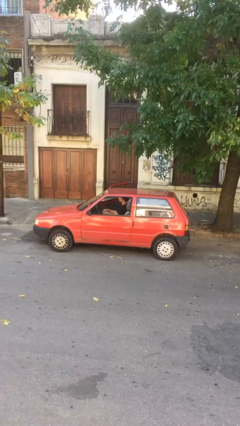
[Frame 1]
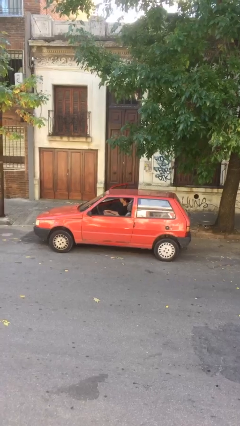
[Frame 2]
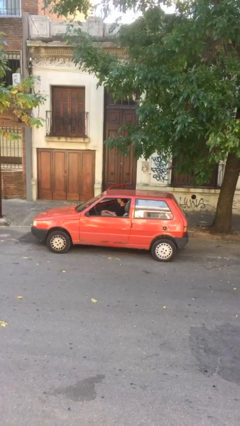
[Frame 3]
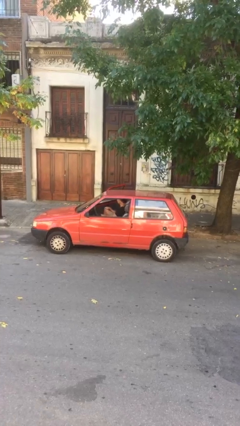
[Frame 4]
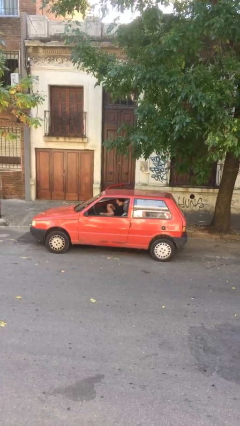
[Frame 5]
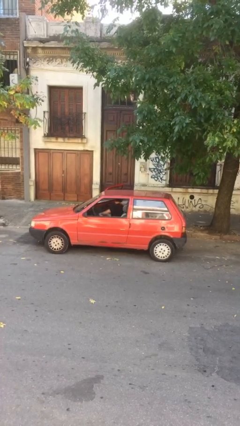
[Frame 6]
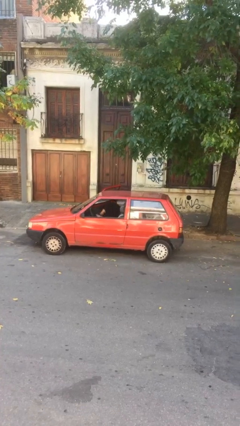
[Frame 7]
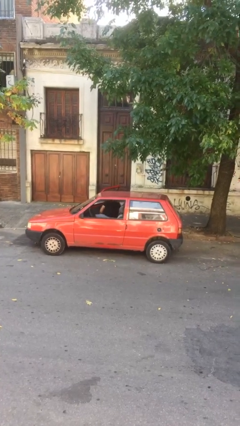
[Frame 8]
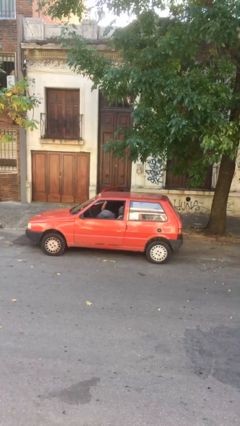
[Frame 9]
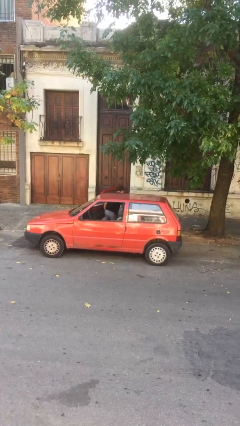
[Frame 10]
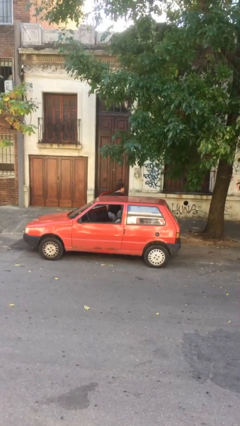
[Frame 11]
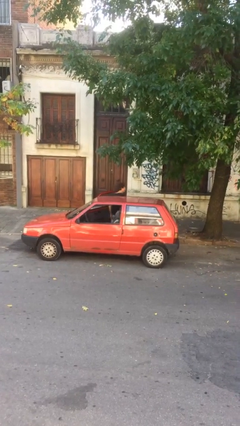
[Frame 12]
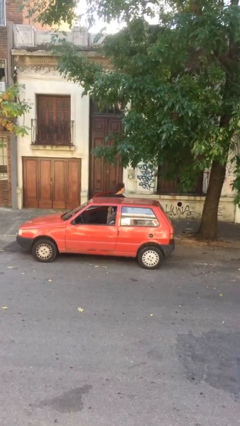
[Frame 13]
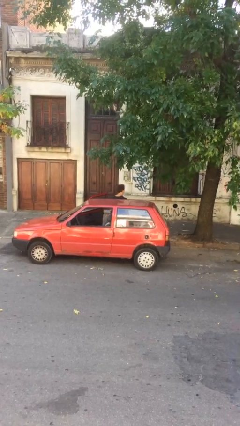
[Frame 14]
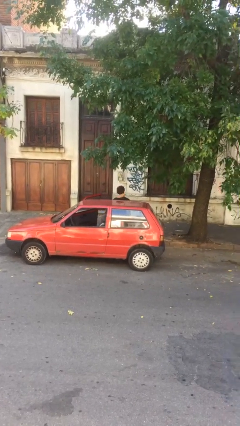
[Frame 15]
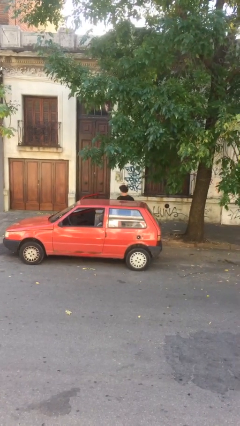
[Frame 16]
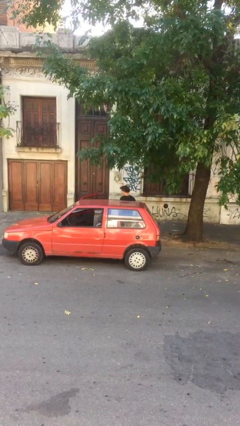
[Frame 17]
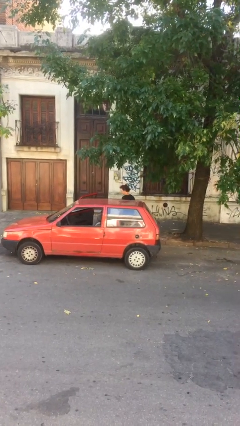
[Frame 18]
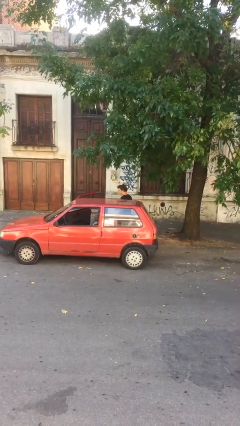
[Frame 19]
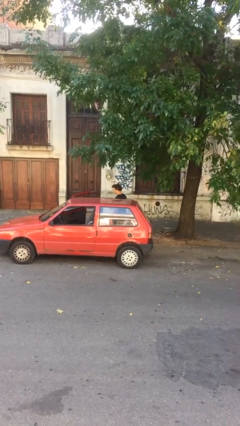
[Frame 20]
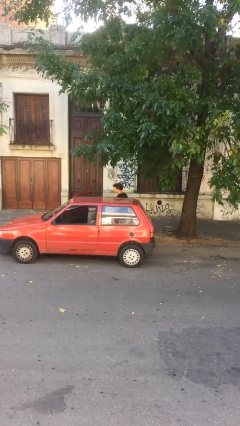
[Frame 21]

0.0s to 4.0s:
person exits car

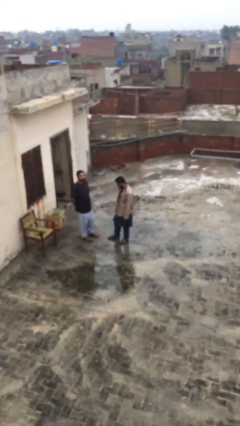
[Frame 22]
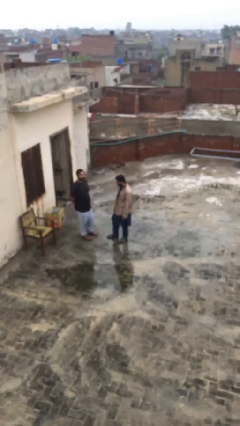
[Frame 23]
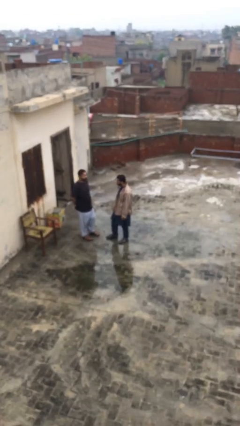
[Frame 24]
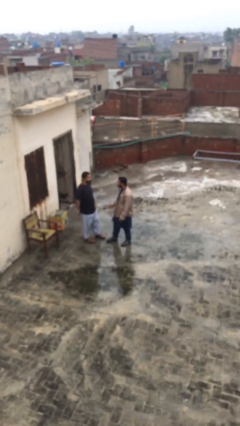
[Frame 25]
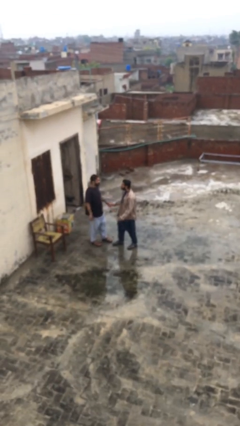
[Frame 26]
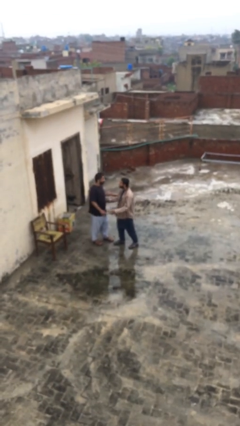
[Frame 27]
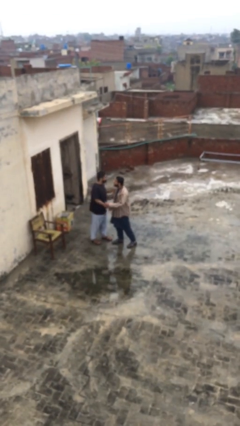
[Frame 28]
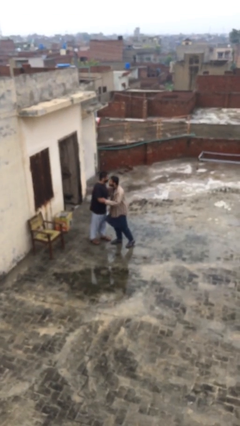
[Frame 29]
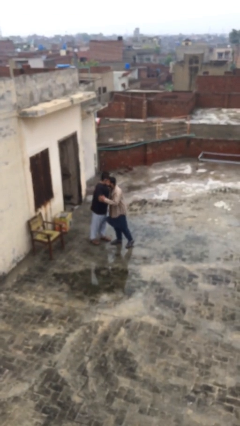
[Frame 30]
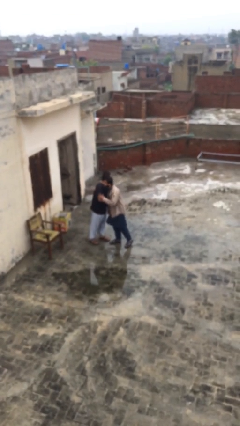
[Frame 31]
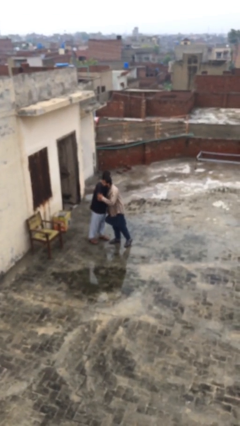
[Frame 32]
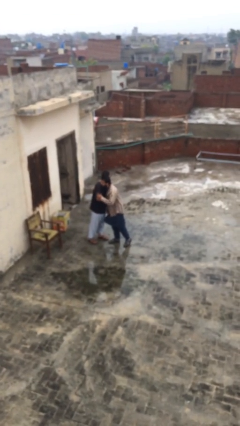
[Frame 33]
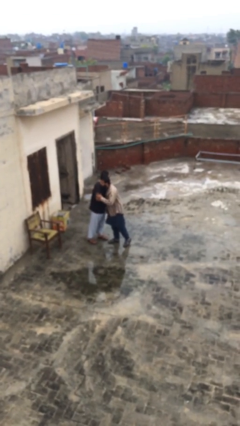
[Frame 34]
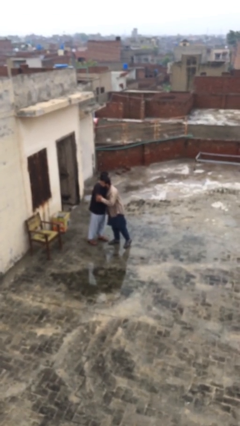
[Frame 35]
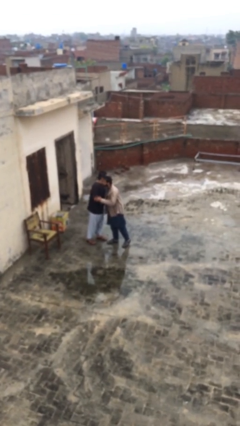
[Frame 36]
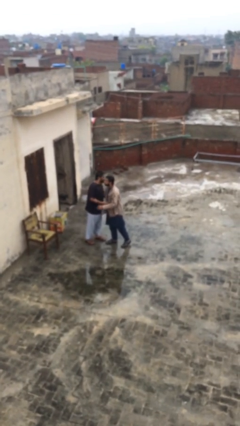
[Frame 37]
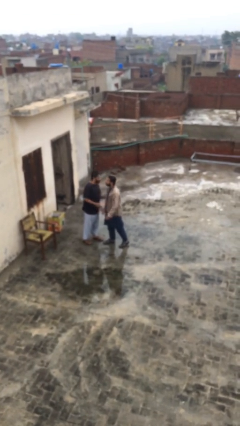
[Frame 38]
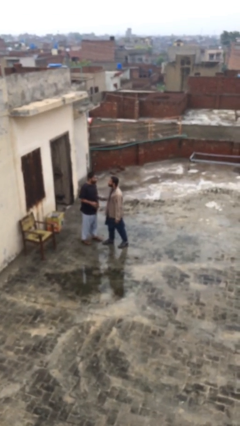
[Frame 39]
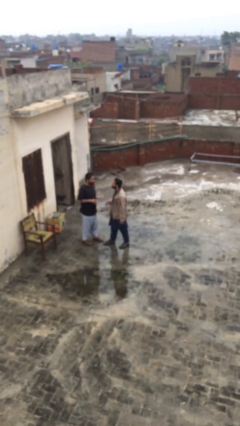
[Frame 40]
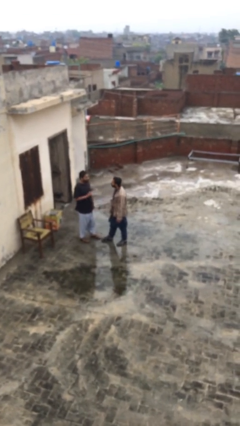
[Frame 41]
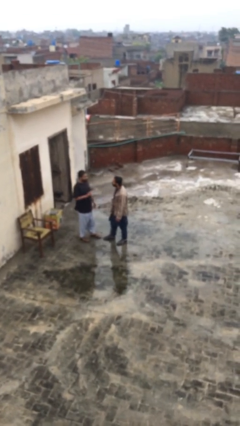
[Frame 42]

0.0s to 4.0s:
person embraces person

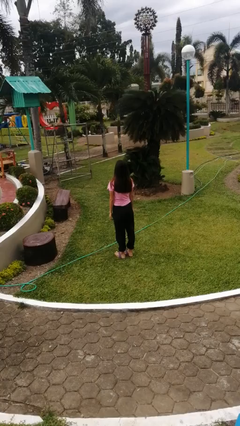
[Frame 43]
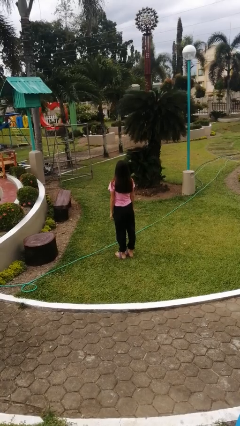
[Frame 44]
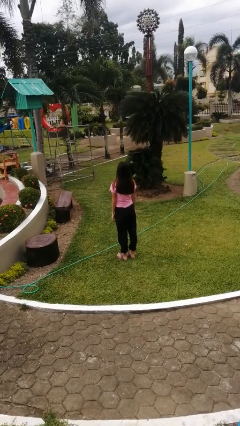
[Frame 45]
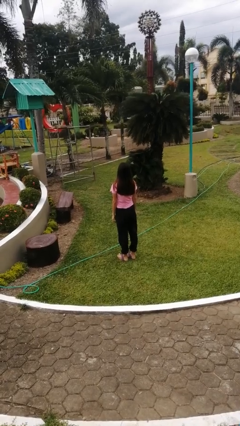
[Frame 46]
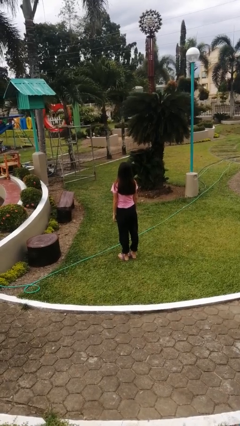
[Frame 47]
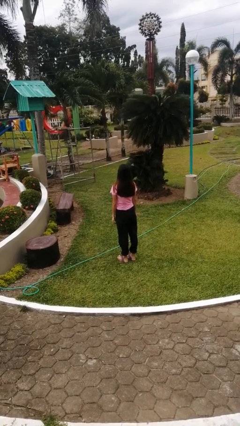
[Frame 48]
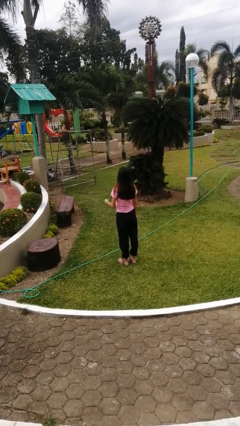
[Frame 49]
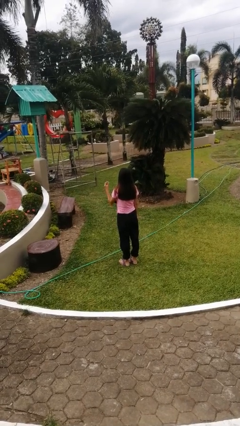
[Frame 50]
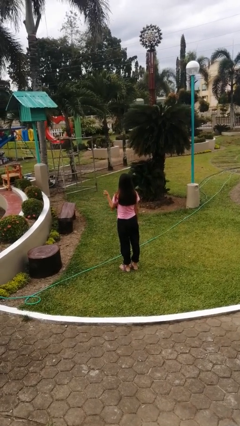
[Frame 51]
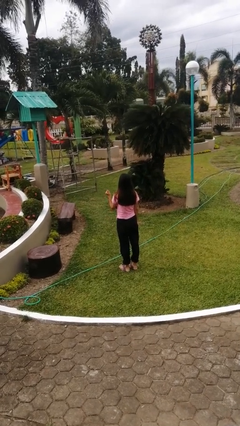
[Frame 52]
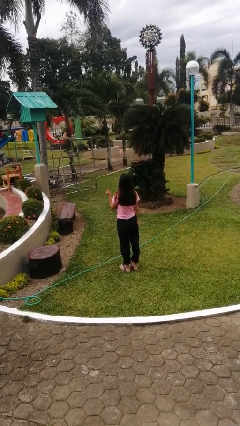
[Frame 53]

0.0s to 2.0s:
person snaps fingers

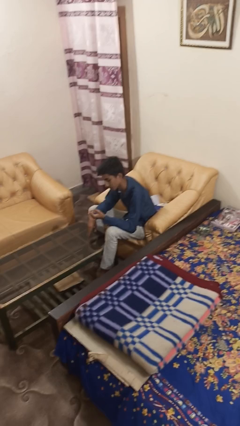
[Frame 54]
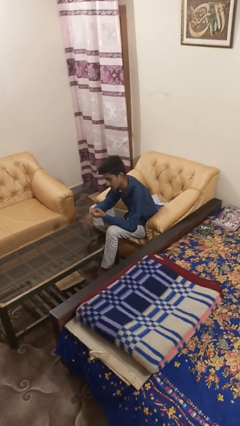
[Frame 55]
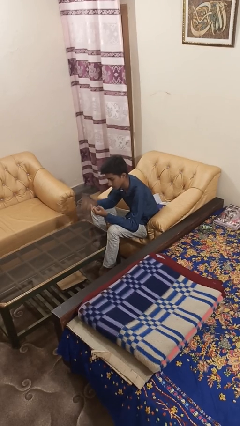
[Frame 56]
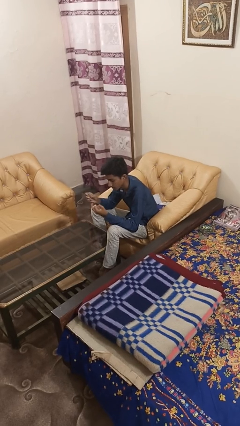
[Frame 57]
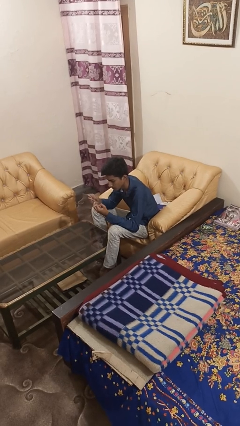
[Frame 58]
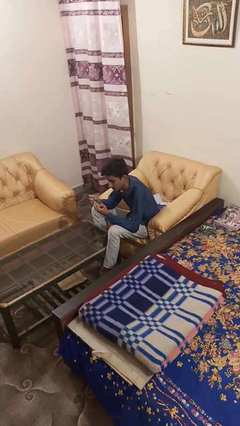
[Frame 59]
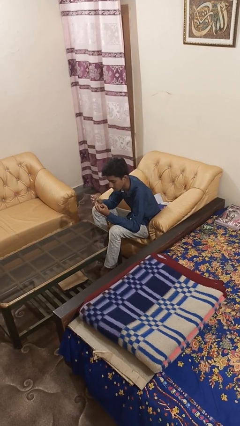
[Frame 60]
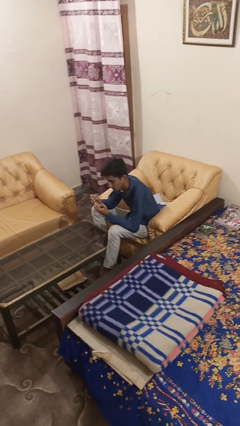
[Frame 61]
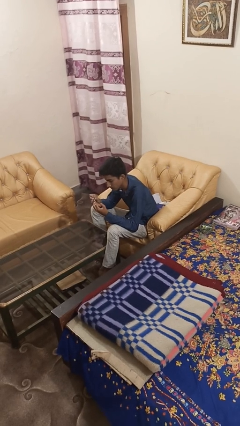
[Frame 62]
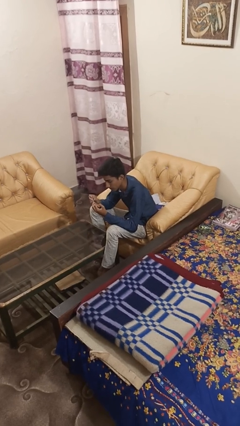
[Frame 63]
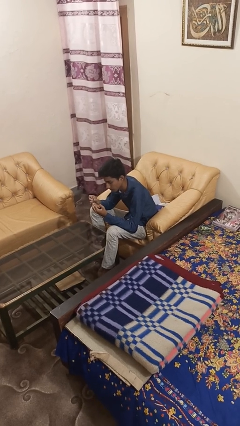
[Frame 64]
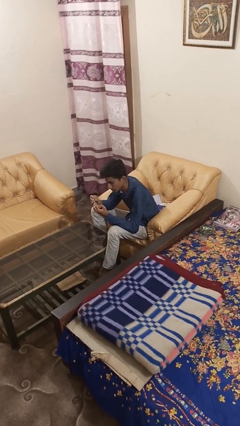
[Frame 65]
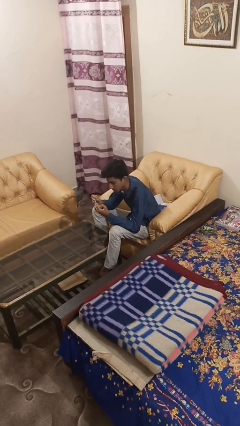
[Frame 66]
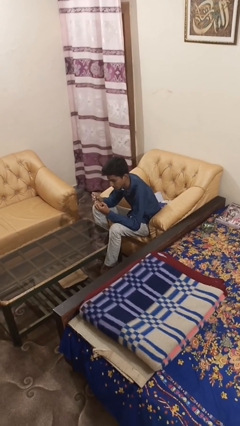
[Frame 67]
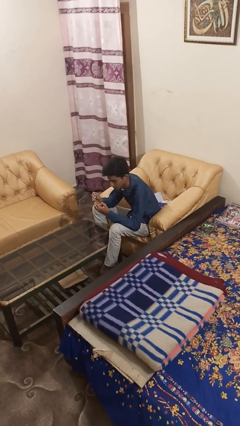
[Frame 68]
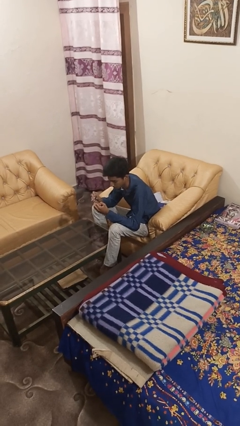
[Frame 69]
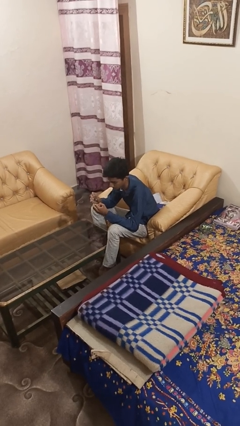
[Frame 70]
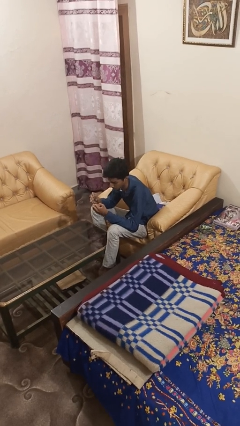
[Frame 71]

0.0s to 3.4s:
person clips fingernails

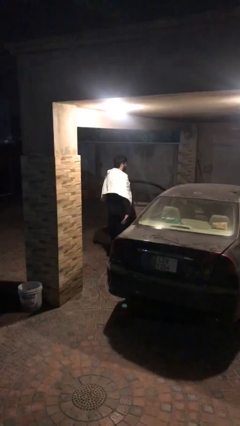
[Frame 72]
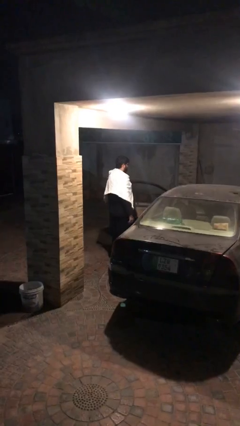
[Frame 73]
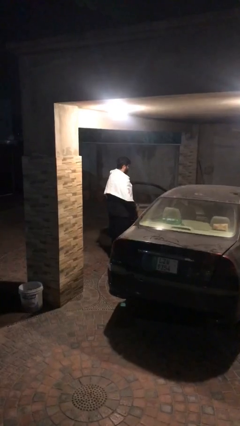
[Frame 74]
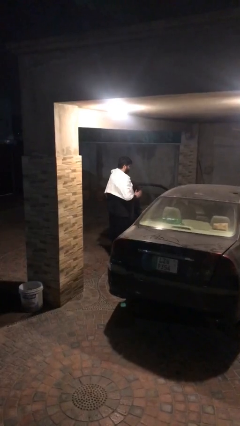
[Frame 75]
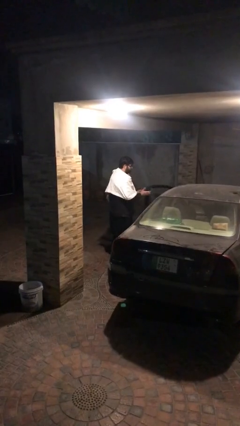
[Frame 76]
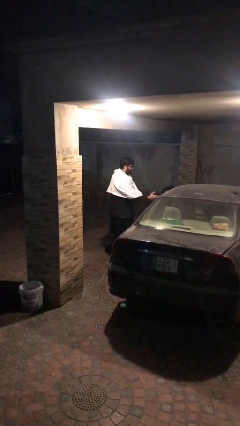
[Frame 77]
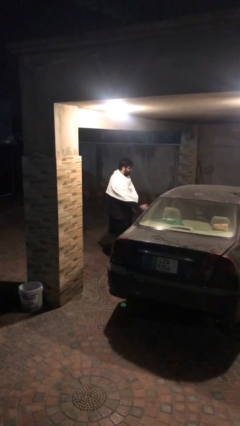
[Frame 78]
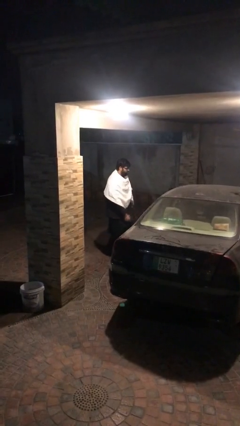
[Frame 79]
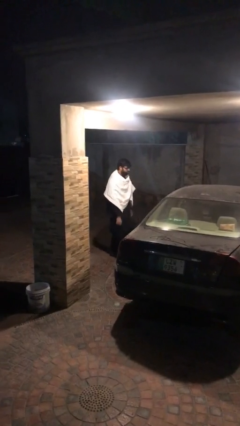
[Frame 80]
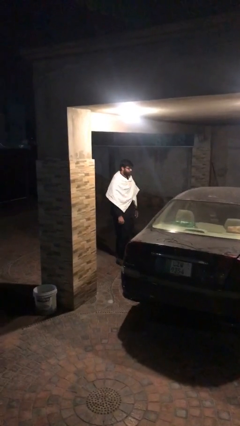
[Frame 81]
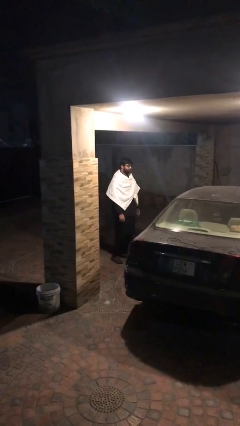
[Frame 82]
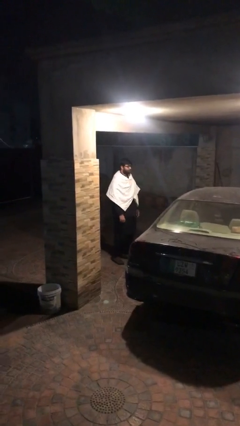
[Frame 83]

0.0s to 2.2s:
person closes car door

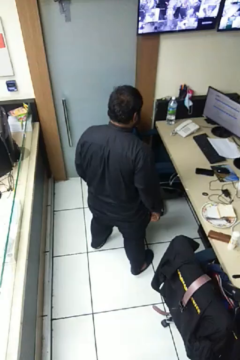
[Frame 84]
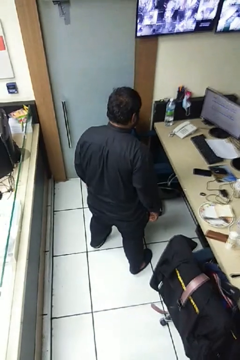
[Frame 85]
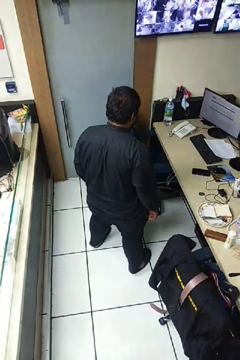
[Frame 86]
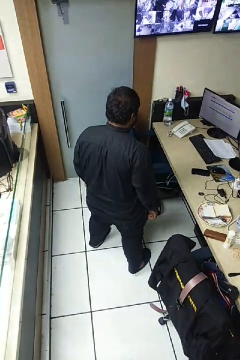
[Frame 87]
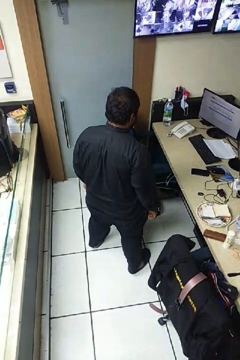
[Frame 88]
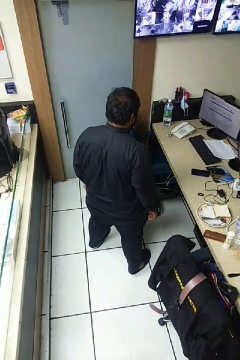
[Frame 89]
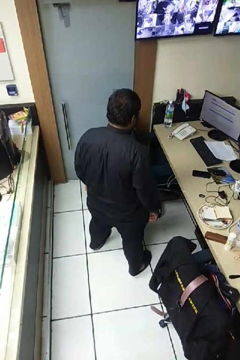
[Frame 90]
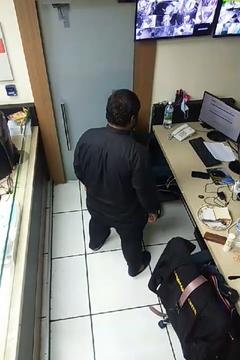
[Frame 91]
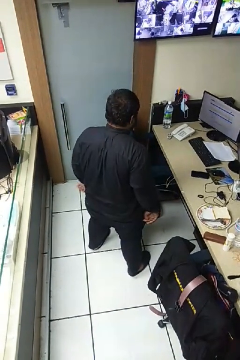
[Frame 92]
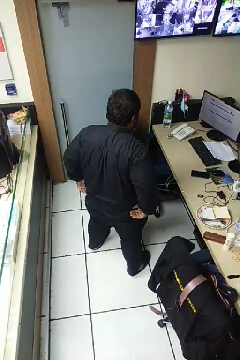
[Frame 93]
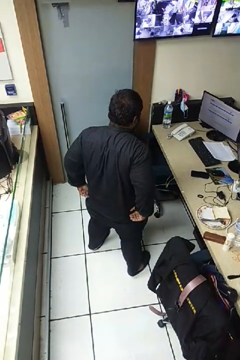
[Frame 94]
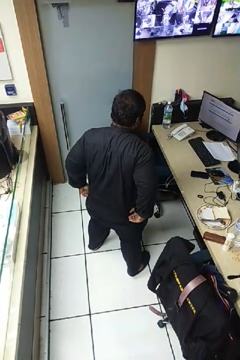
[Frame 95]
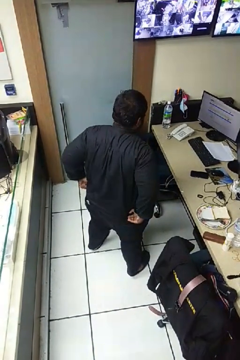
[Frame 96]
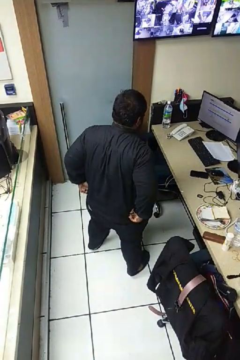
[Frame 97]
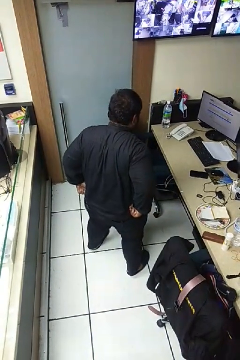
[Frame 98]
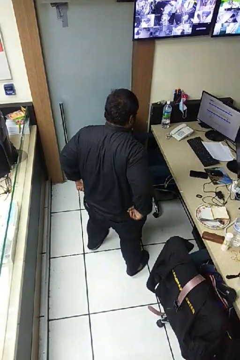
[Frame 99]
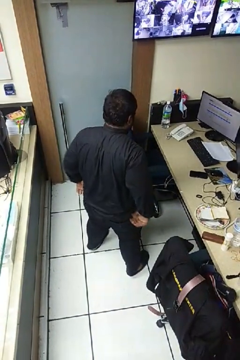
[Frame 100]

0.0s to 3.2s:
person hikes up pants
